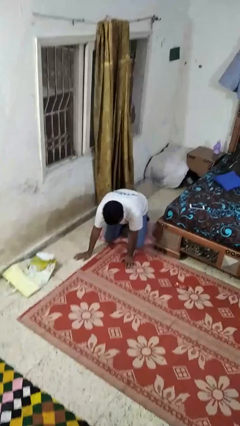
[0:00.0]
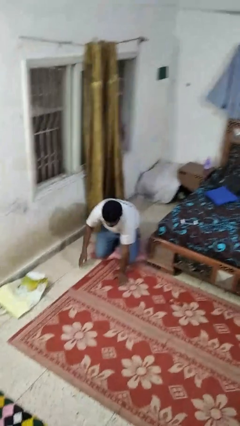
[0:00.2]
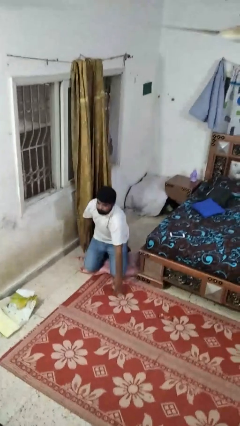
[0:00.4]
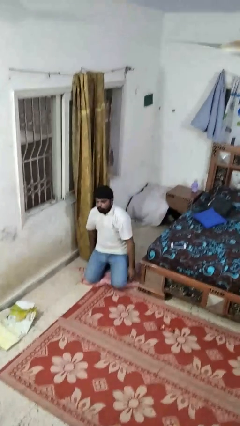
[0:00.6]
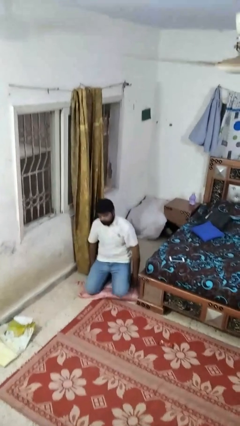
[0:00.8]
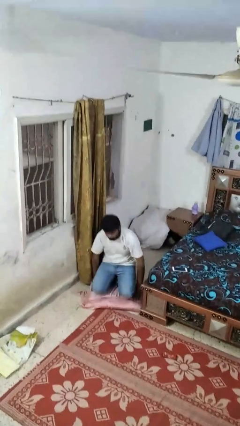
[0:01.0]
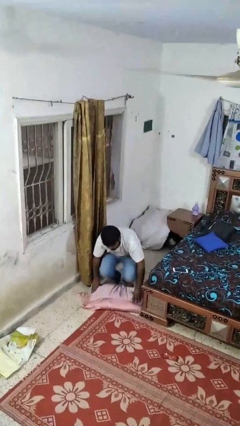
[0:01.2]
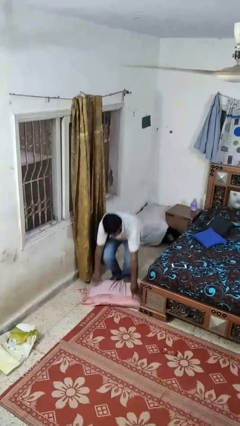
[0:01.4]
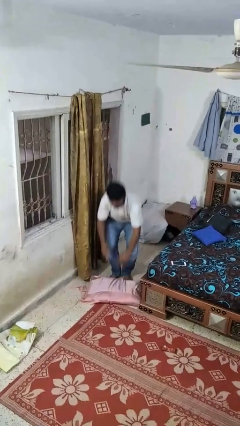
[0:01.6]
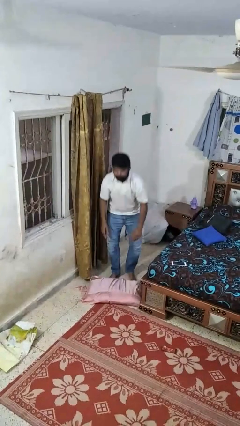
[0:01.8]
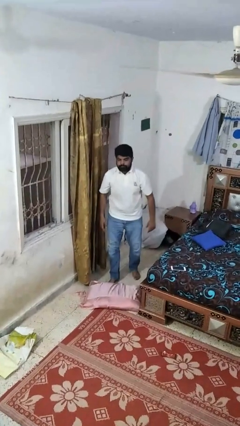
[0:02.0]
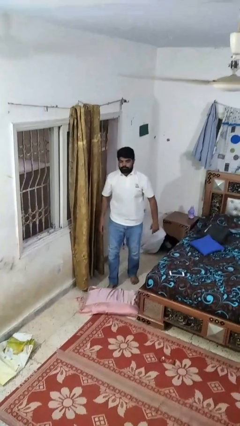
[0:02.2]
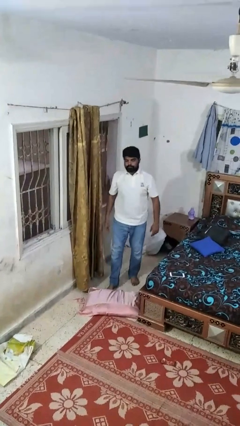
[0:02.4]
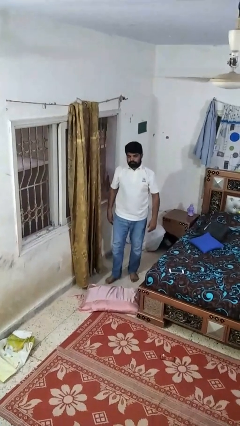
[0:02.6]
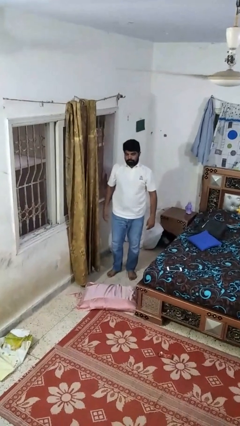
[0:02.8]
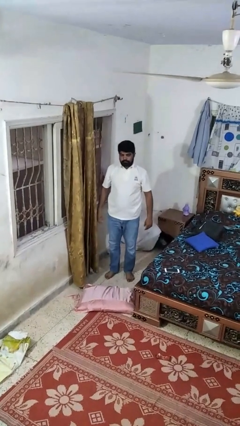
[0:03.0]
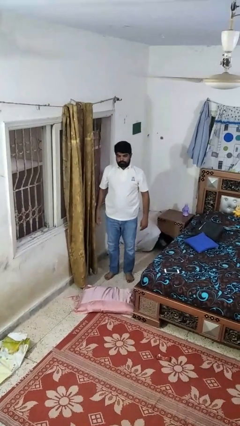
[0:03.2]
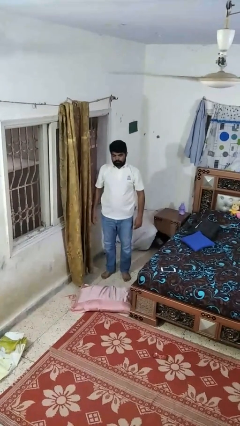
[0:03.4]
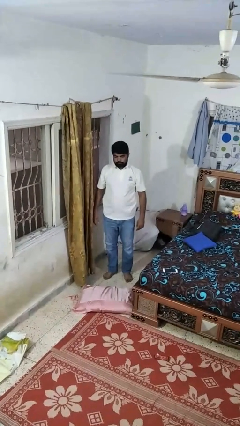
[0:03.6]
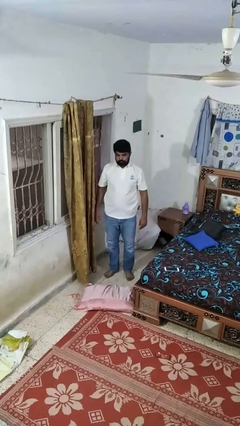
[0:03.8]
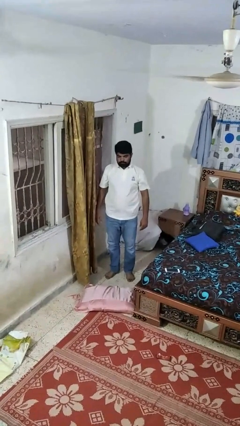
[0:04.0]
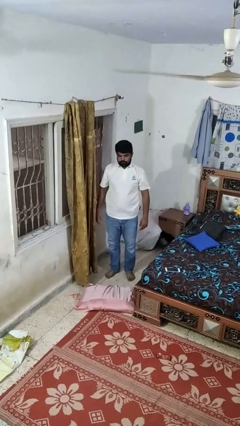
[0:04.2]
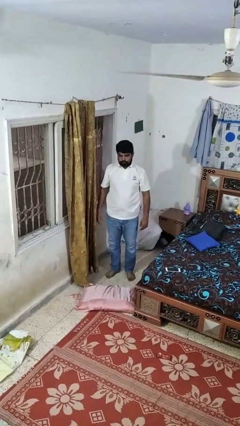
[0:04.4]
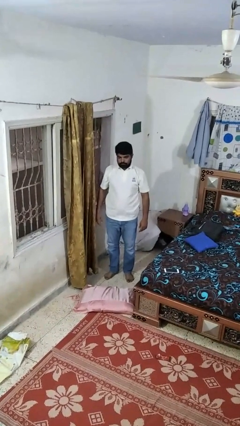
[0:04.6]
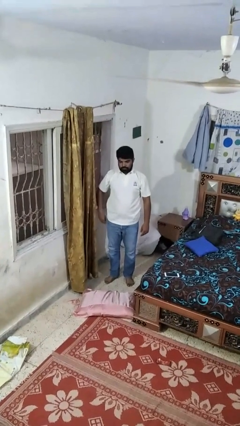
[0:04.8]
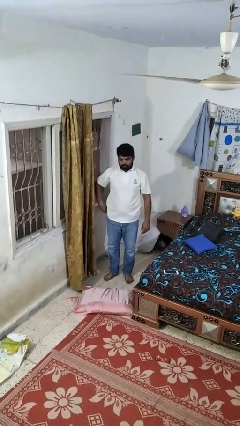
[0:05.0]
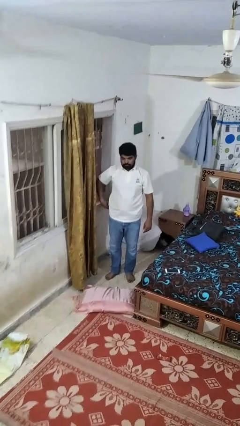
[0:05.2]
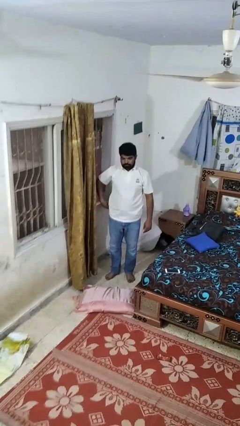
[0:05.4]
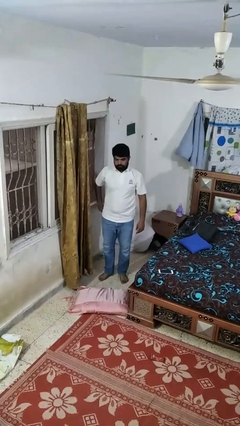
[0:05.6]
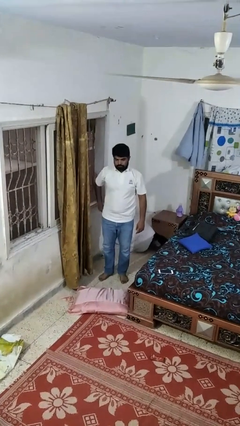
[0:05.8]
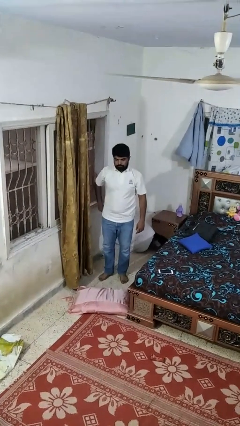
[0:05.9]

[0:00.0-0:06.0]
person stands up from floor

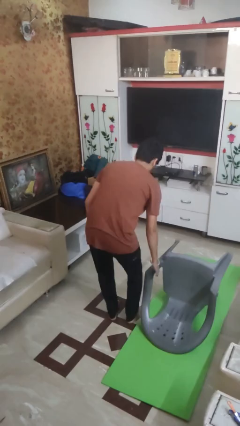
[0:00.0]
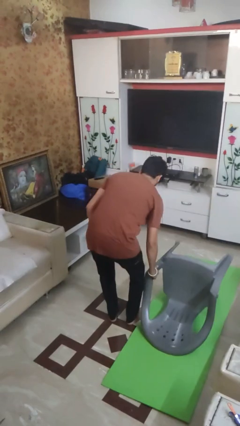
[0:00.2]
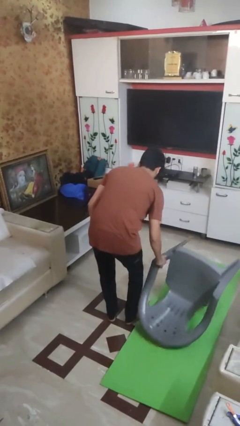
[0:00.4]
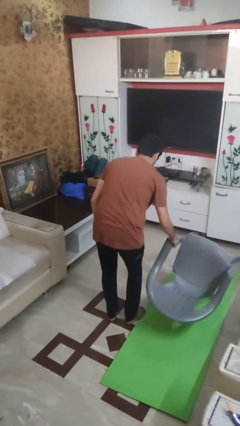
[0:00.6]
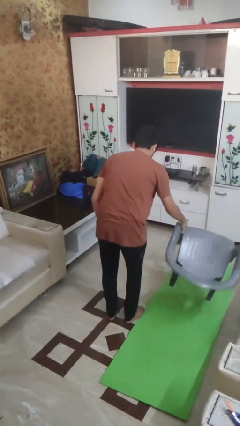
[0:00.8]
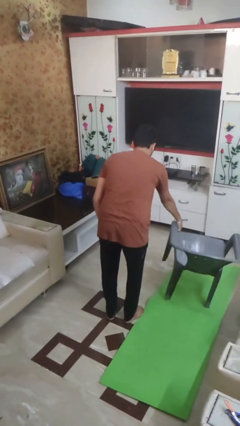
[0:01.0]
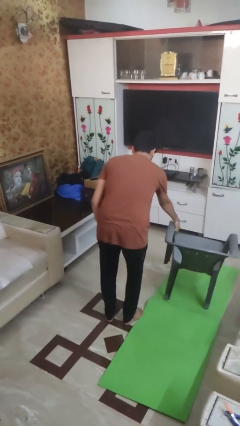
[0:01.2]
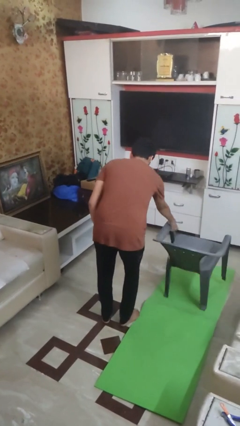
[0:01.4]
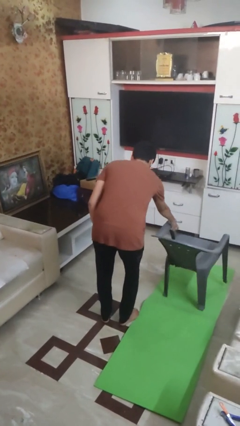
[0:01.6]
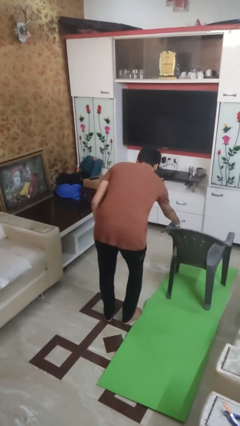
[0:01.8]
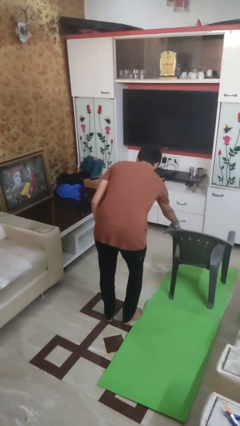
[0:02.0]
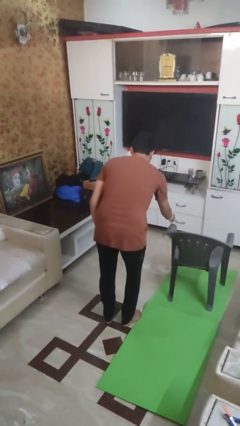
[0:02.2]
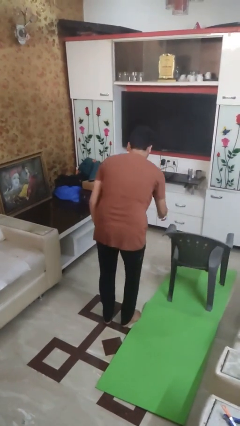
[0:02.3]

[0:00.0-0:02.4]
person sets upright furniture

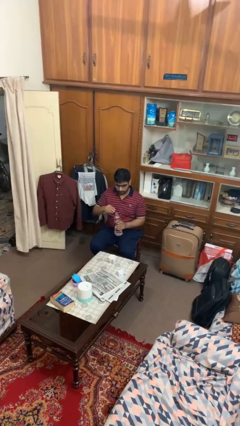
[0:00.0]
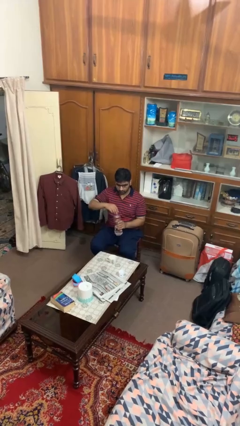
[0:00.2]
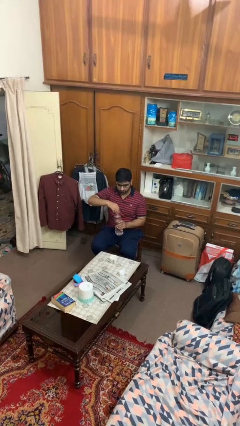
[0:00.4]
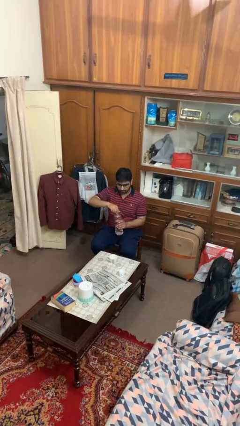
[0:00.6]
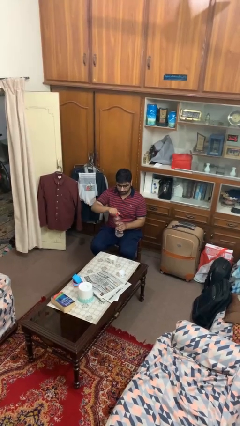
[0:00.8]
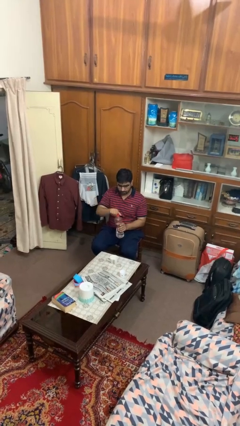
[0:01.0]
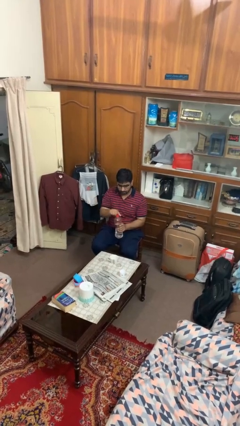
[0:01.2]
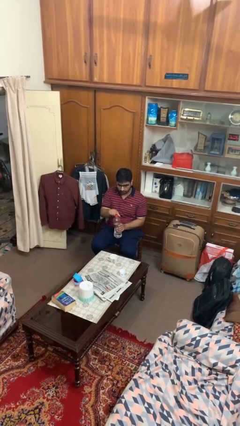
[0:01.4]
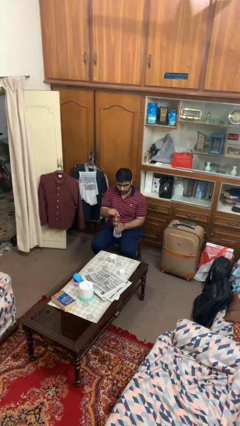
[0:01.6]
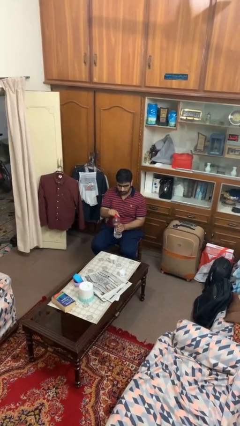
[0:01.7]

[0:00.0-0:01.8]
person screws lid to bottle

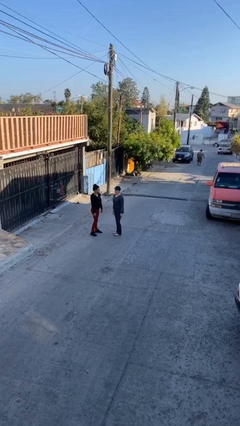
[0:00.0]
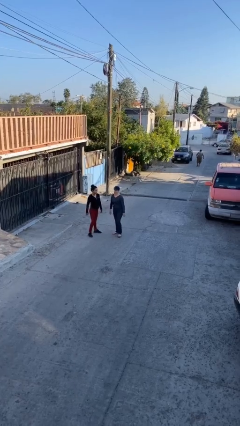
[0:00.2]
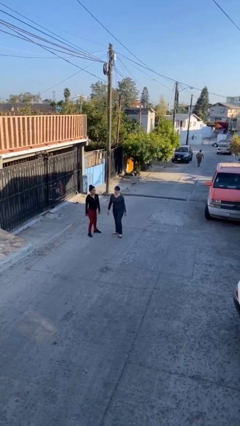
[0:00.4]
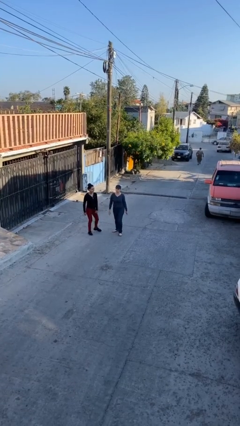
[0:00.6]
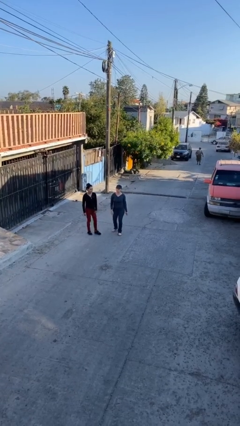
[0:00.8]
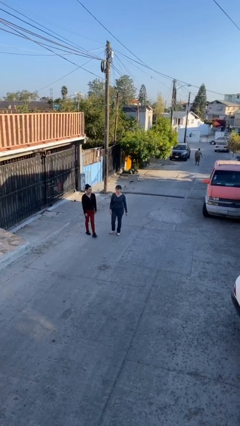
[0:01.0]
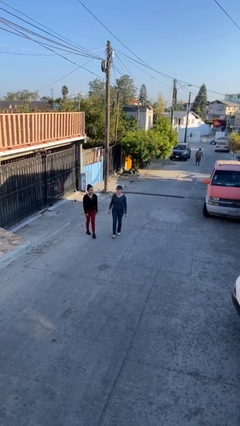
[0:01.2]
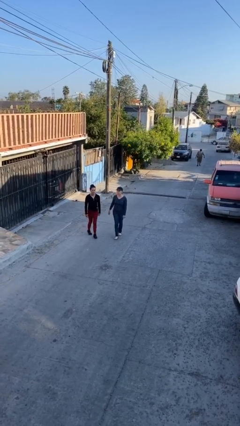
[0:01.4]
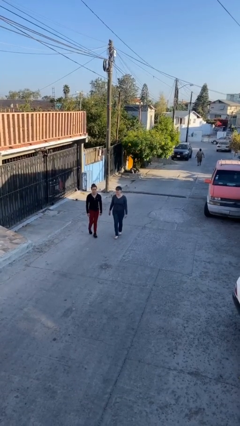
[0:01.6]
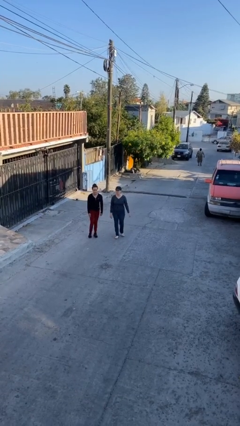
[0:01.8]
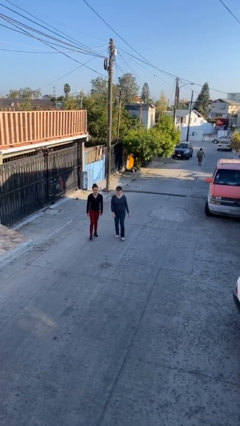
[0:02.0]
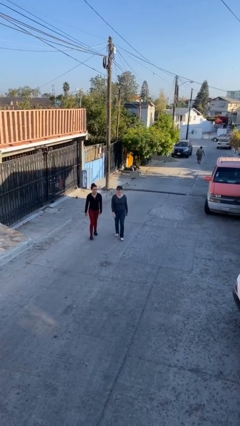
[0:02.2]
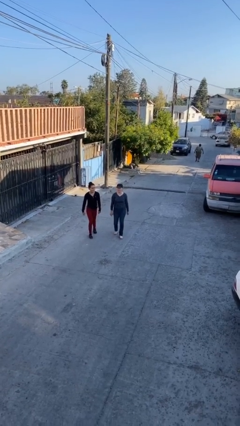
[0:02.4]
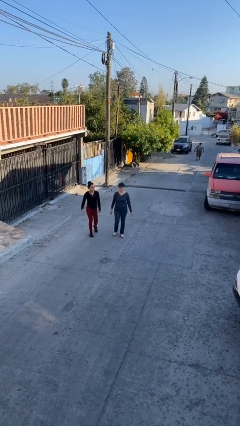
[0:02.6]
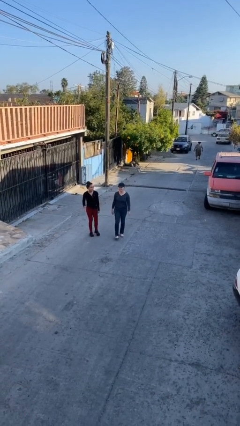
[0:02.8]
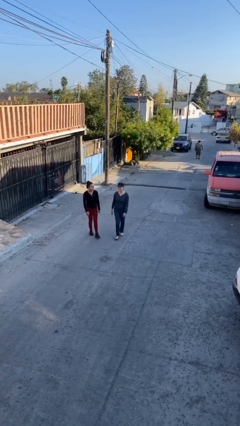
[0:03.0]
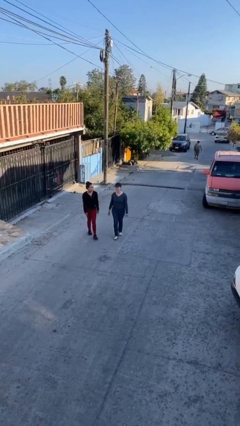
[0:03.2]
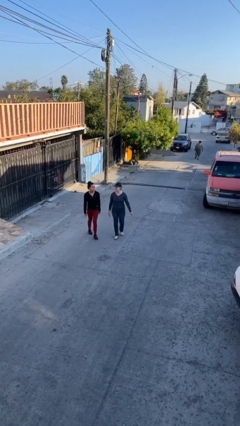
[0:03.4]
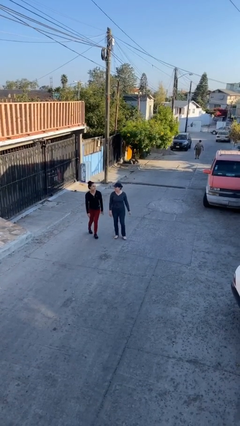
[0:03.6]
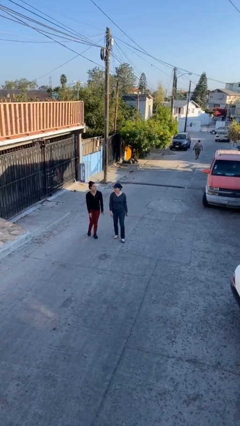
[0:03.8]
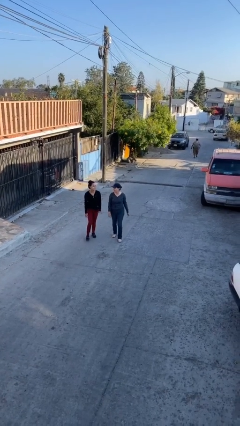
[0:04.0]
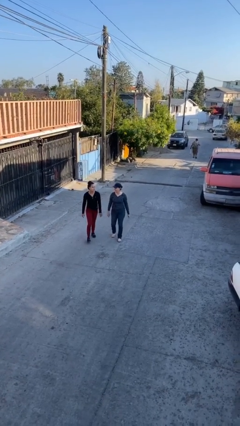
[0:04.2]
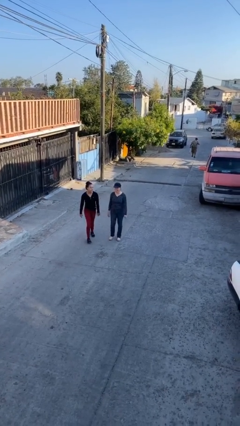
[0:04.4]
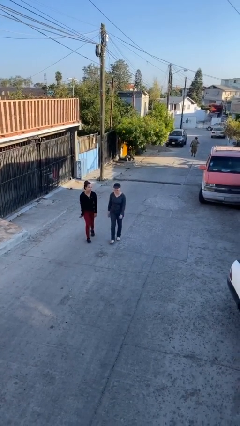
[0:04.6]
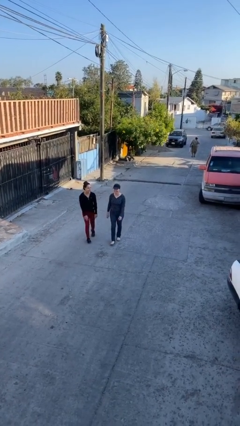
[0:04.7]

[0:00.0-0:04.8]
person talks to person

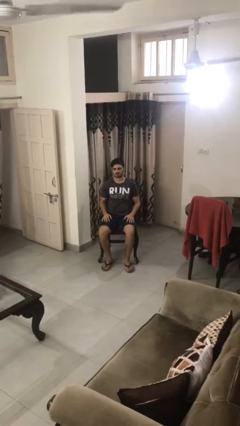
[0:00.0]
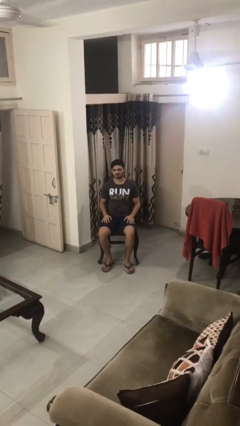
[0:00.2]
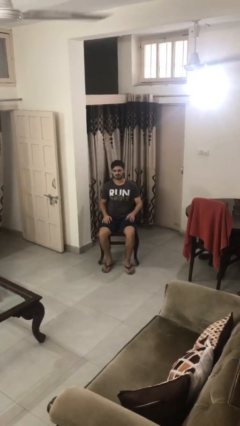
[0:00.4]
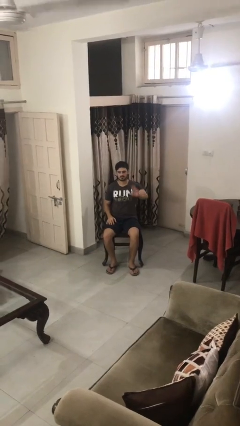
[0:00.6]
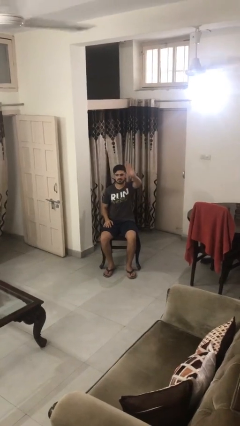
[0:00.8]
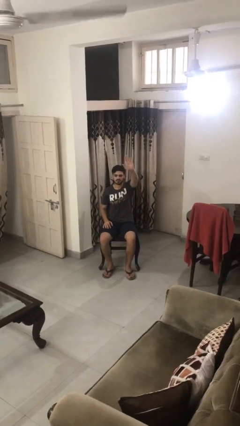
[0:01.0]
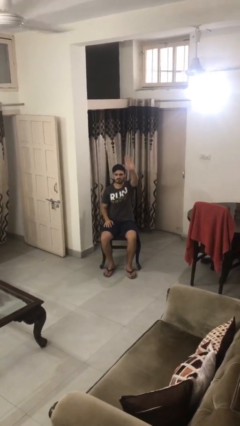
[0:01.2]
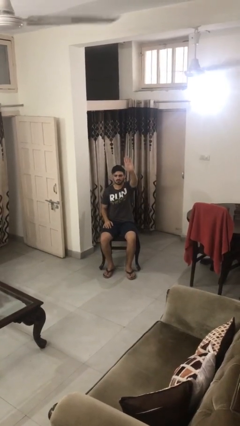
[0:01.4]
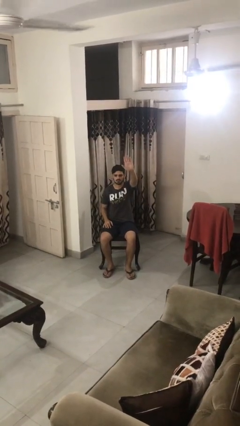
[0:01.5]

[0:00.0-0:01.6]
person gestures raise hand

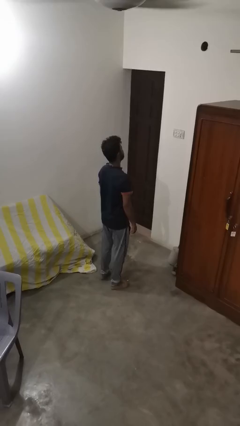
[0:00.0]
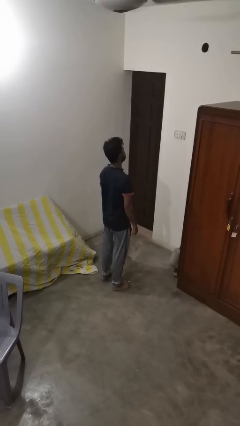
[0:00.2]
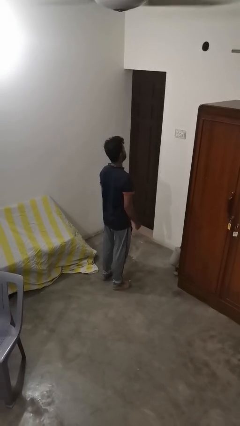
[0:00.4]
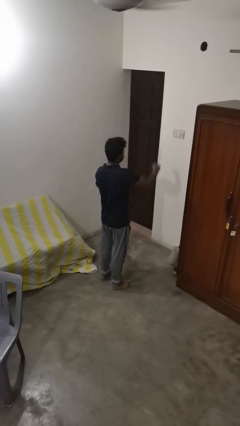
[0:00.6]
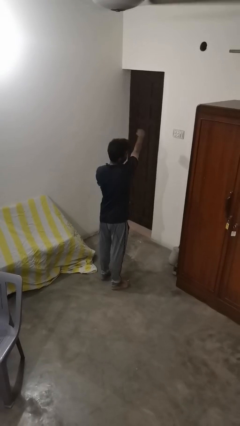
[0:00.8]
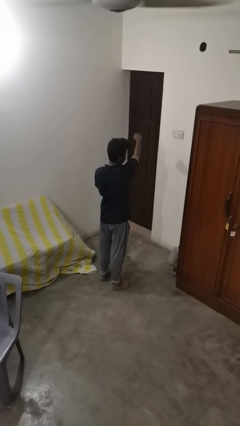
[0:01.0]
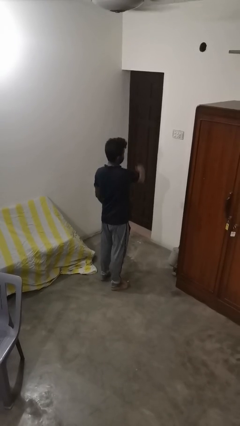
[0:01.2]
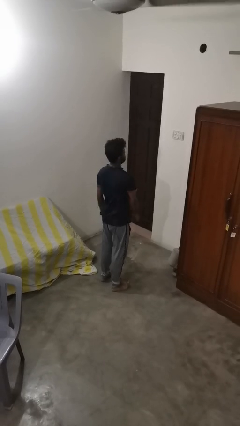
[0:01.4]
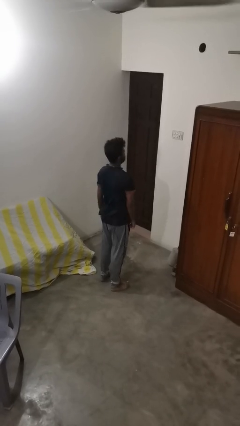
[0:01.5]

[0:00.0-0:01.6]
person punches
